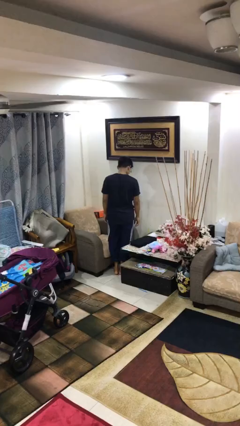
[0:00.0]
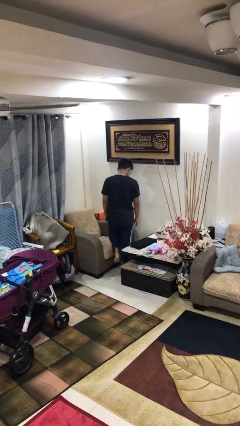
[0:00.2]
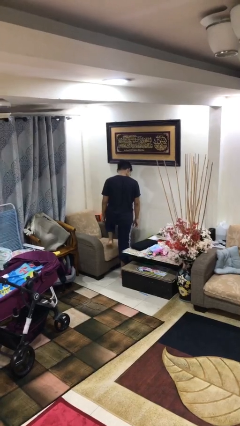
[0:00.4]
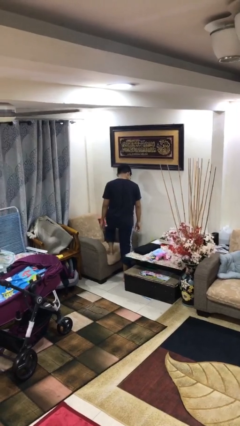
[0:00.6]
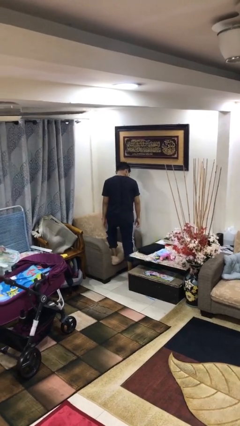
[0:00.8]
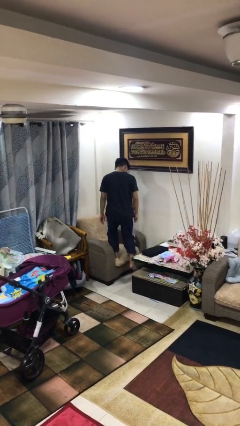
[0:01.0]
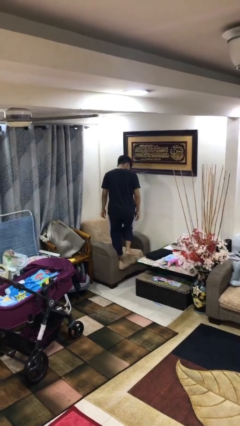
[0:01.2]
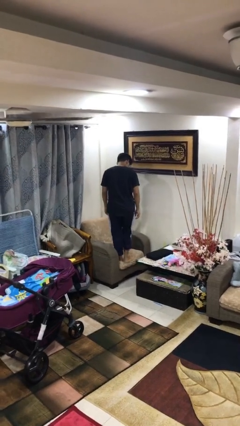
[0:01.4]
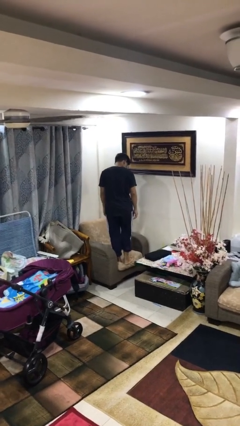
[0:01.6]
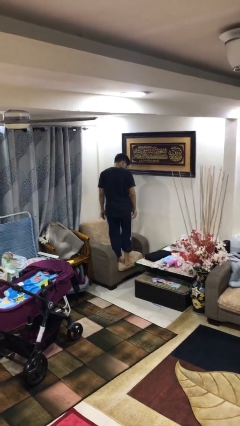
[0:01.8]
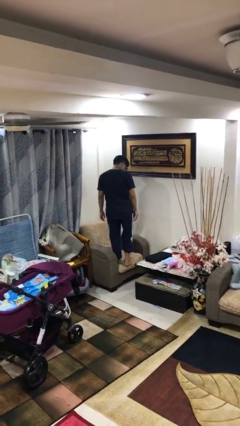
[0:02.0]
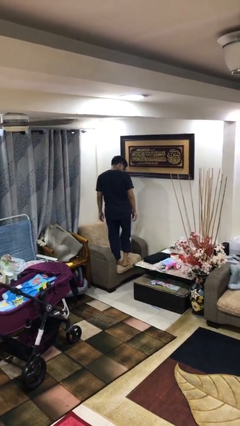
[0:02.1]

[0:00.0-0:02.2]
person climbs on couch

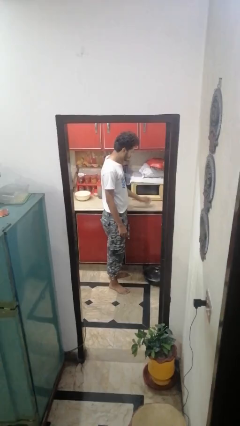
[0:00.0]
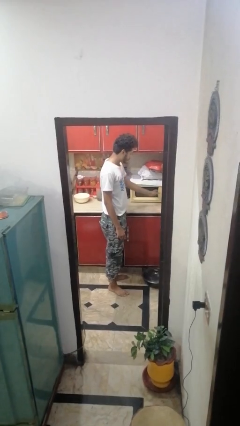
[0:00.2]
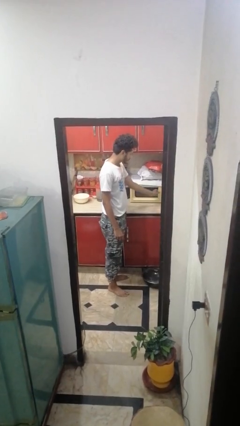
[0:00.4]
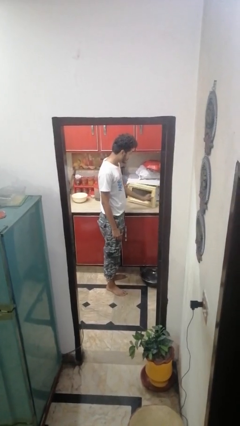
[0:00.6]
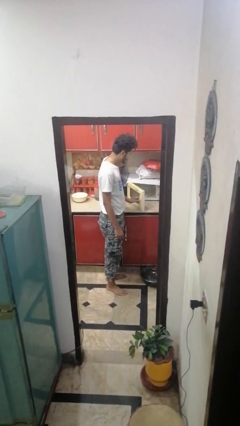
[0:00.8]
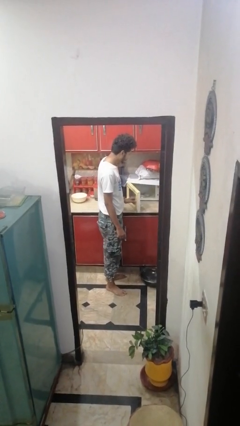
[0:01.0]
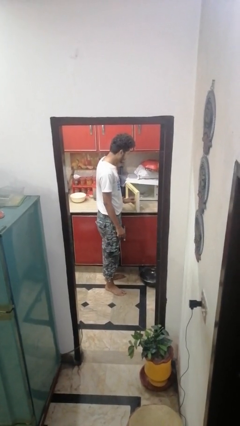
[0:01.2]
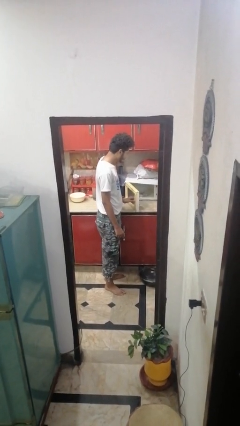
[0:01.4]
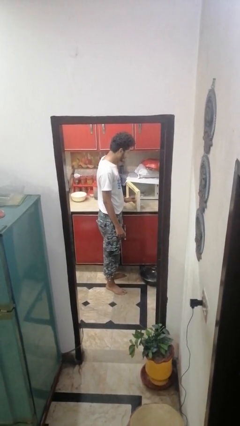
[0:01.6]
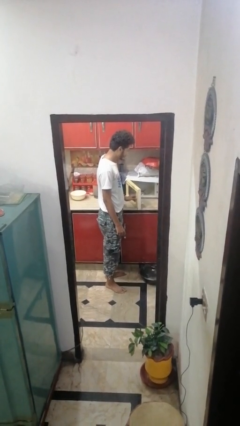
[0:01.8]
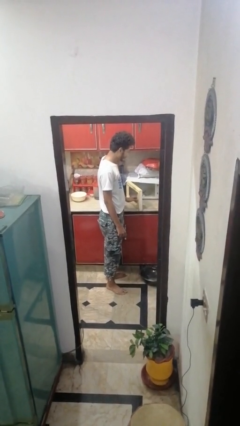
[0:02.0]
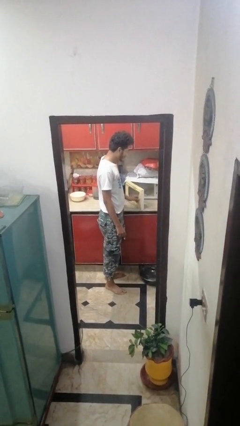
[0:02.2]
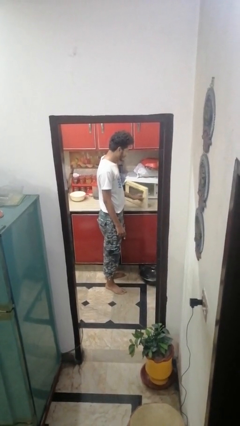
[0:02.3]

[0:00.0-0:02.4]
person opens microwave

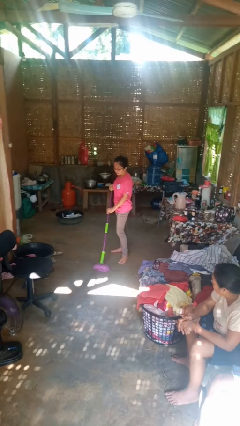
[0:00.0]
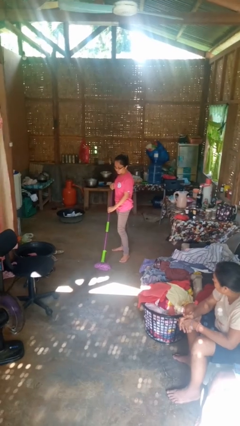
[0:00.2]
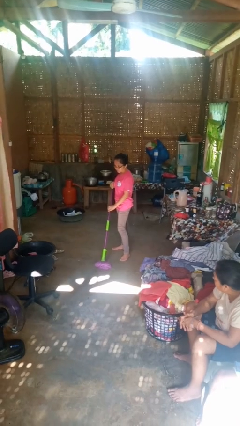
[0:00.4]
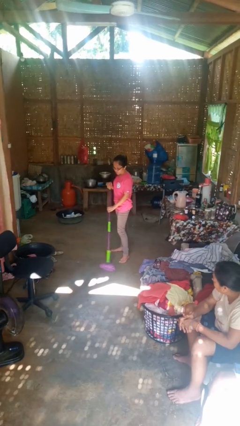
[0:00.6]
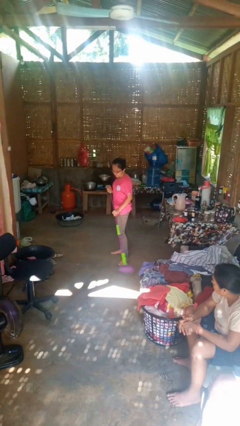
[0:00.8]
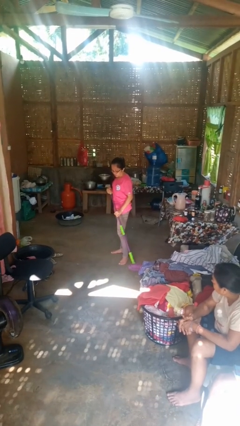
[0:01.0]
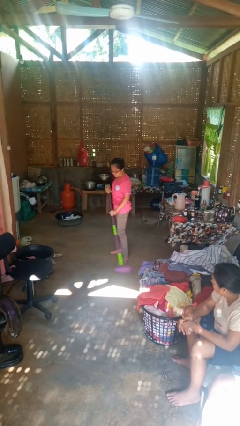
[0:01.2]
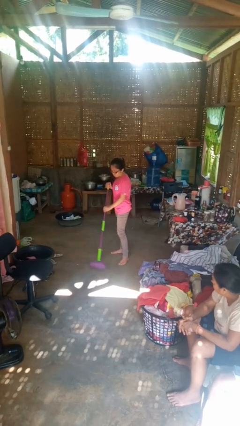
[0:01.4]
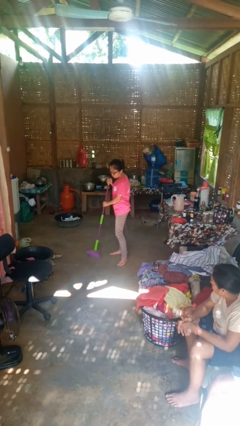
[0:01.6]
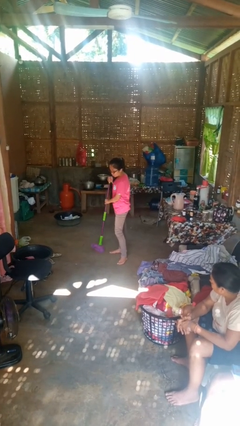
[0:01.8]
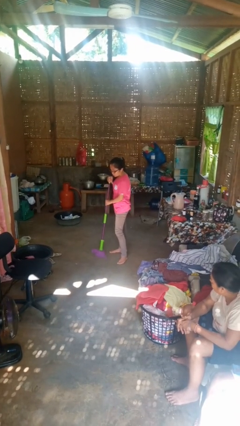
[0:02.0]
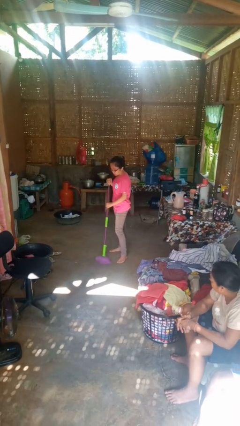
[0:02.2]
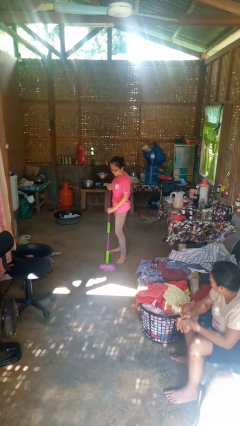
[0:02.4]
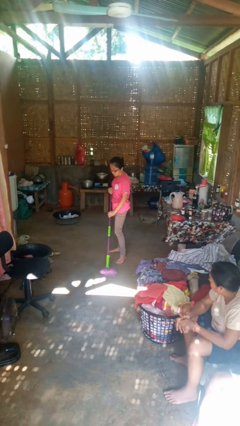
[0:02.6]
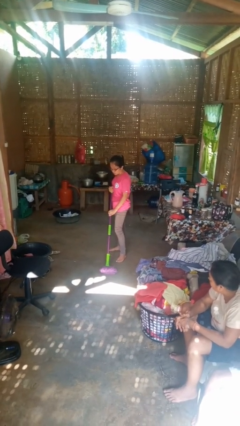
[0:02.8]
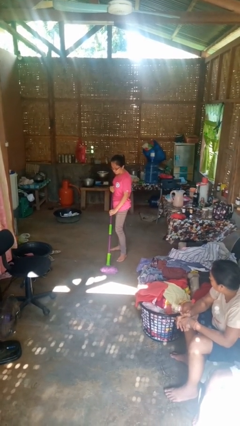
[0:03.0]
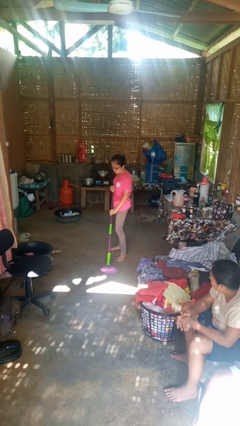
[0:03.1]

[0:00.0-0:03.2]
person mops

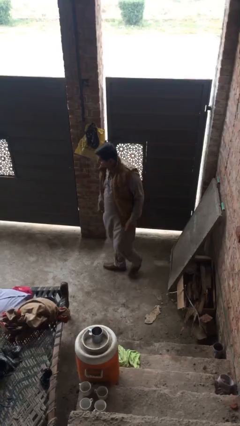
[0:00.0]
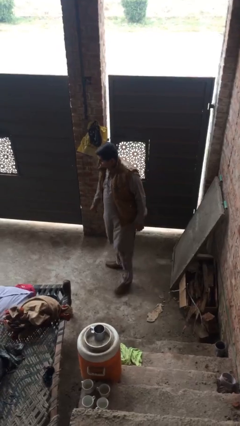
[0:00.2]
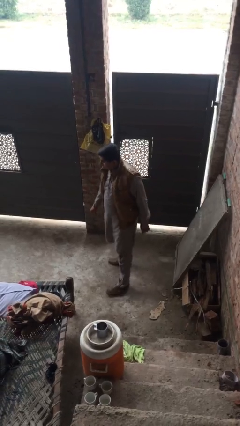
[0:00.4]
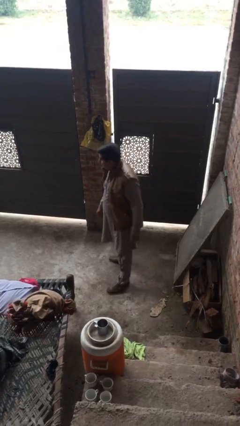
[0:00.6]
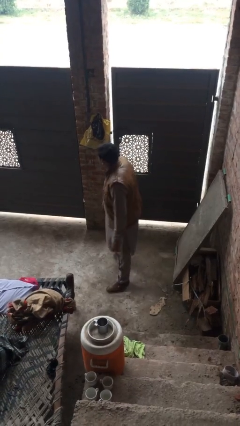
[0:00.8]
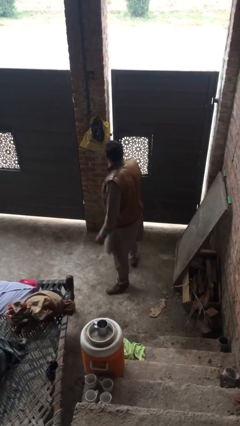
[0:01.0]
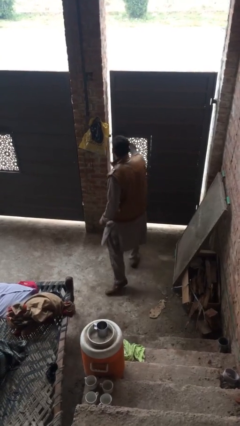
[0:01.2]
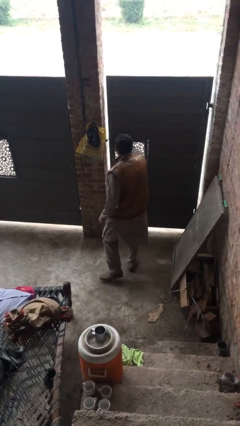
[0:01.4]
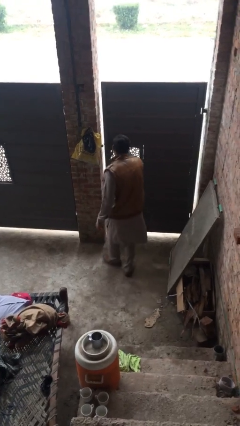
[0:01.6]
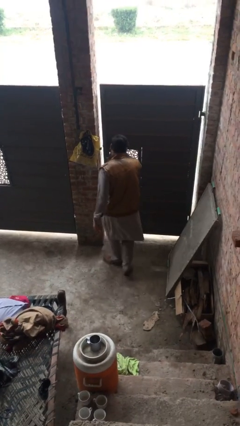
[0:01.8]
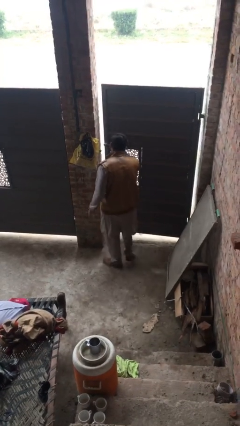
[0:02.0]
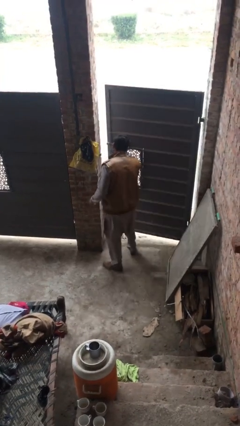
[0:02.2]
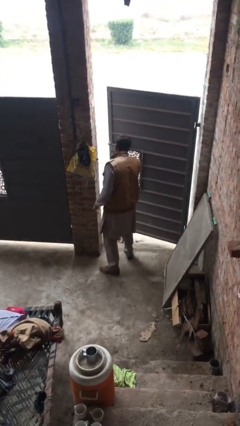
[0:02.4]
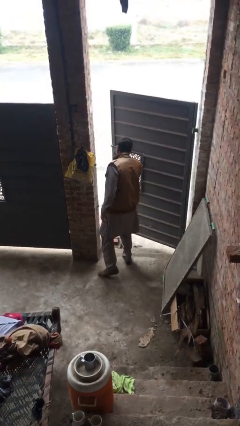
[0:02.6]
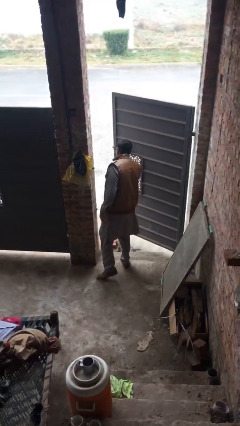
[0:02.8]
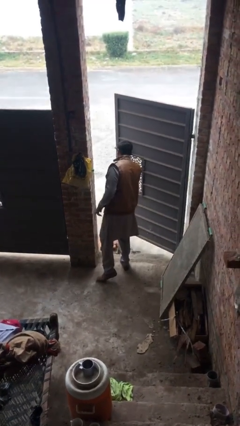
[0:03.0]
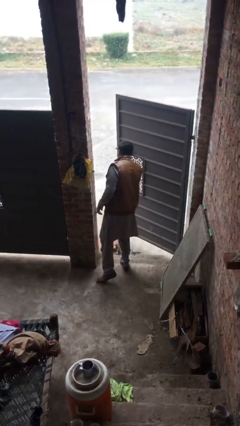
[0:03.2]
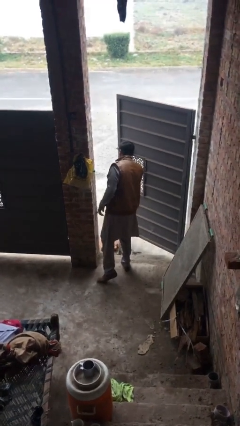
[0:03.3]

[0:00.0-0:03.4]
person opens facility door

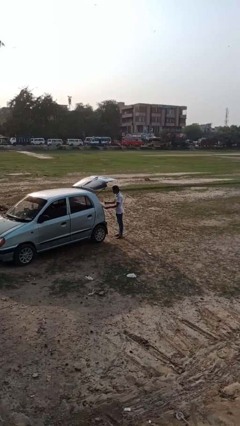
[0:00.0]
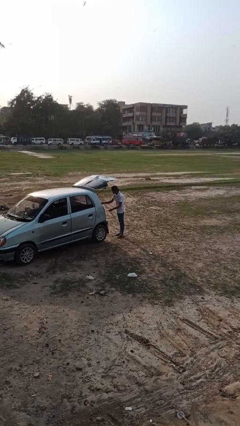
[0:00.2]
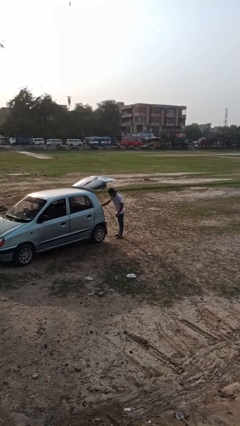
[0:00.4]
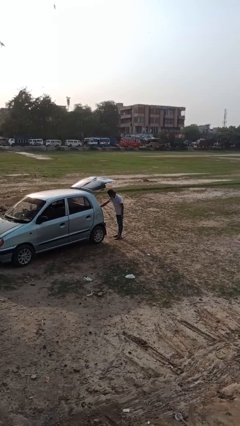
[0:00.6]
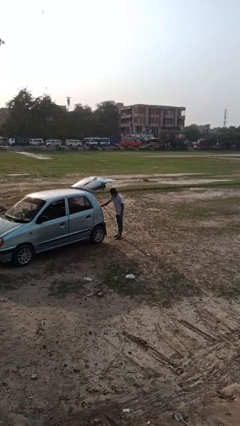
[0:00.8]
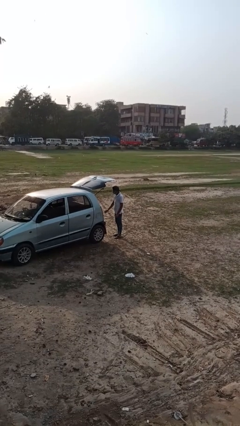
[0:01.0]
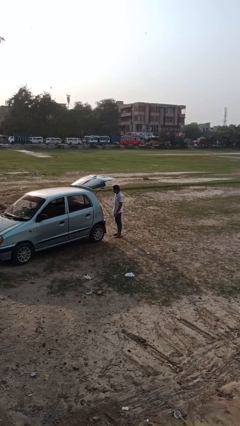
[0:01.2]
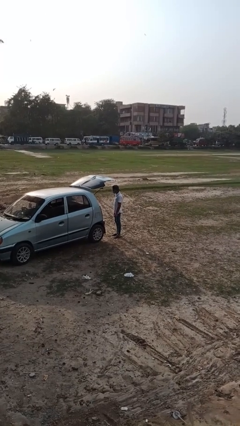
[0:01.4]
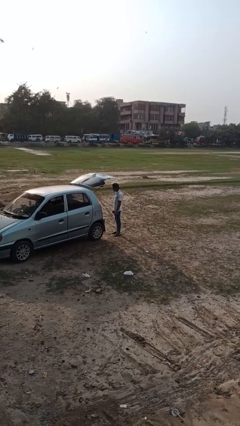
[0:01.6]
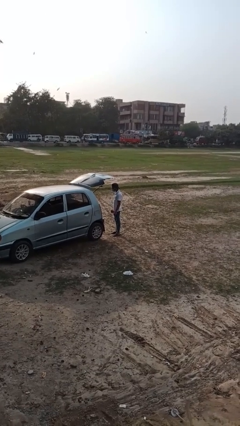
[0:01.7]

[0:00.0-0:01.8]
person loads car

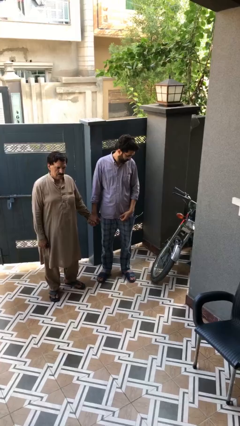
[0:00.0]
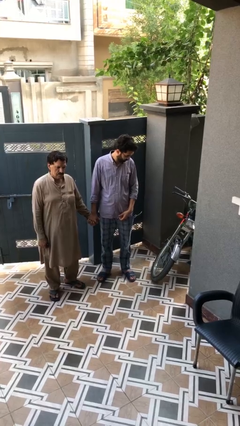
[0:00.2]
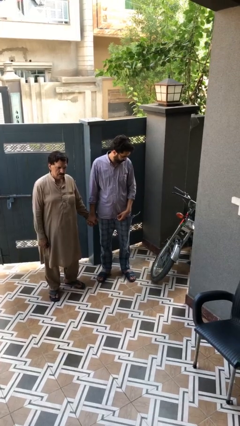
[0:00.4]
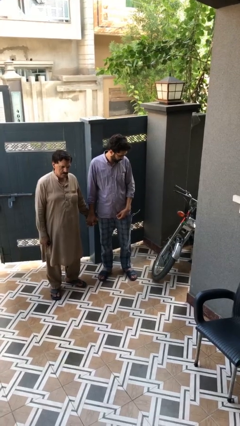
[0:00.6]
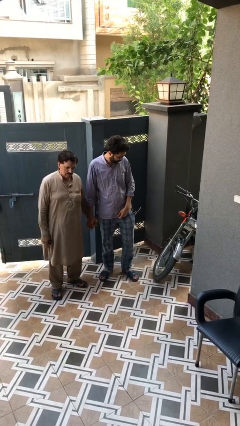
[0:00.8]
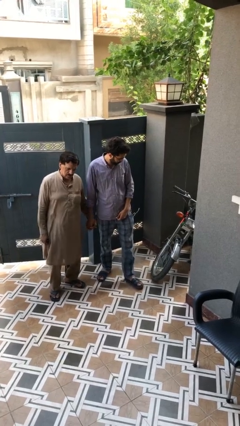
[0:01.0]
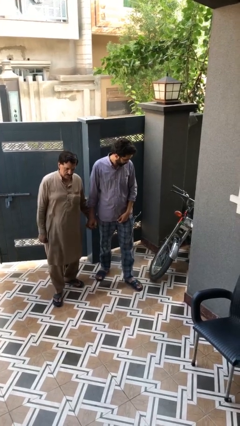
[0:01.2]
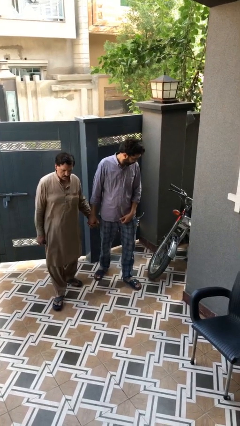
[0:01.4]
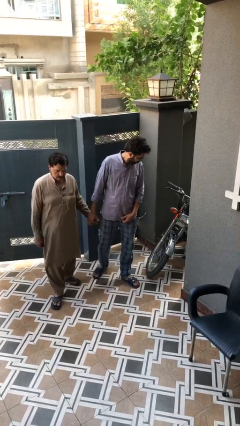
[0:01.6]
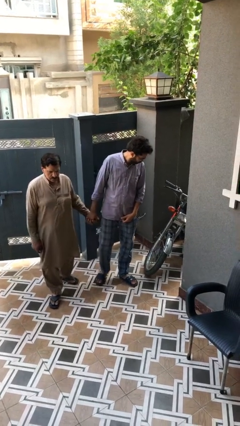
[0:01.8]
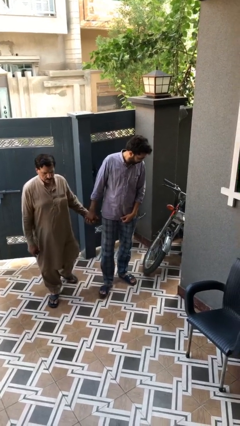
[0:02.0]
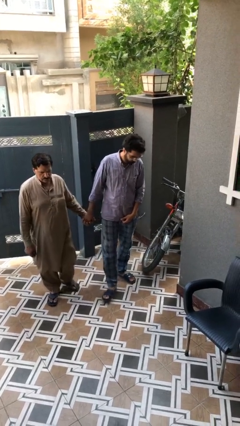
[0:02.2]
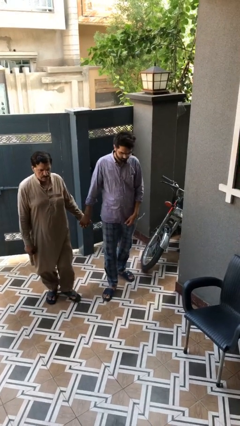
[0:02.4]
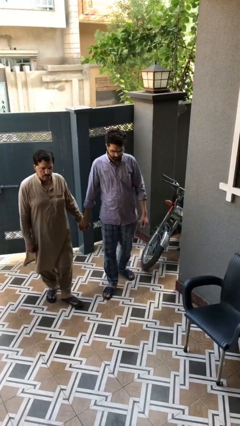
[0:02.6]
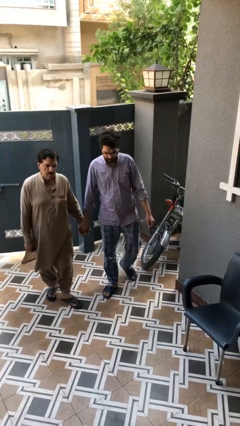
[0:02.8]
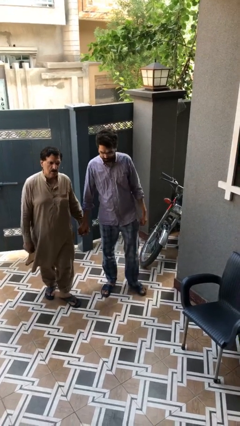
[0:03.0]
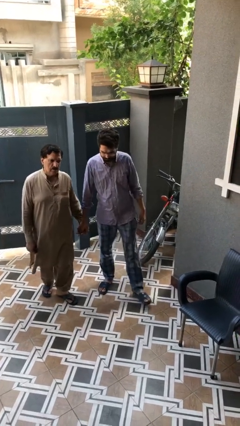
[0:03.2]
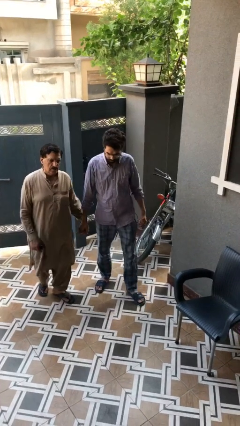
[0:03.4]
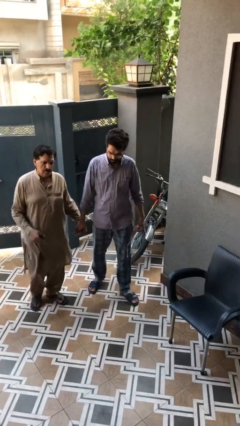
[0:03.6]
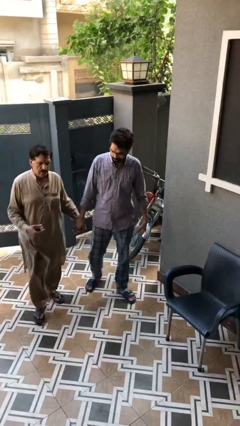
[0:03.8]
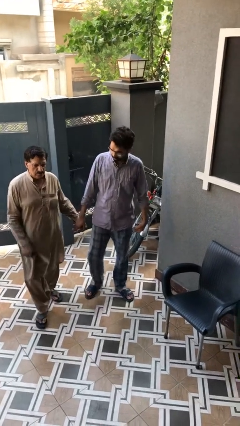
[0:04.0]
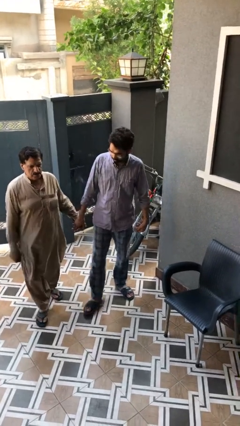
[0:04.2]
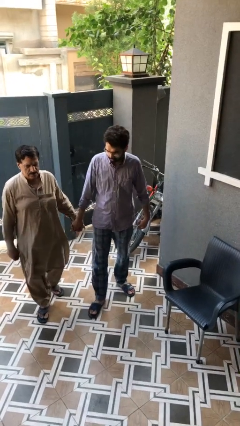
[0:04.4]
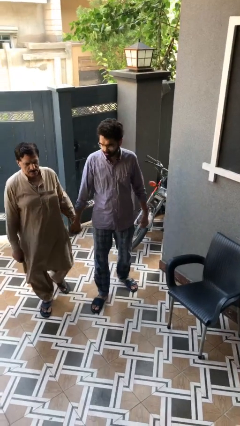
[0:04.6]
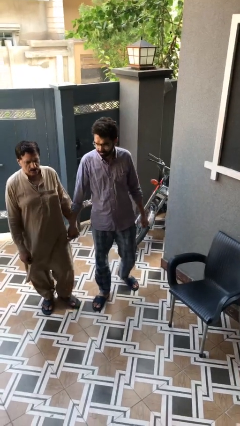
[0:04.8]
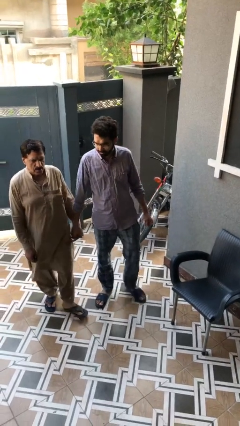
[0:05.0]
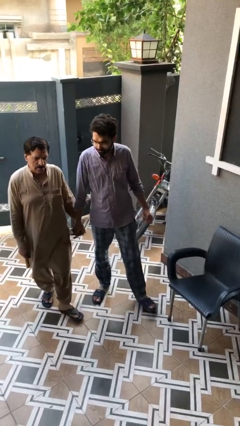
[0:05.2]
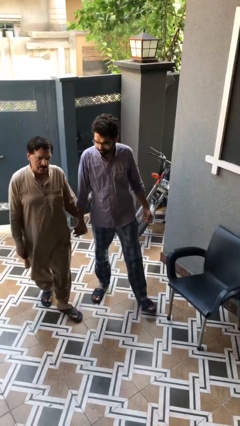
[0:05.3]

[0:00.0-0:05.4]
person holds hand
